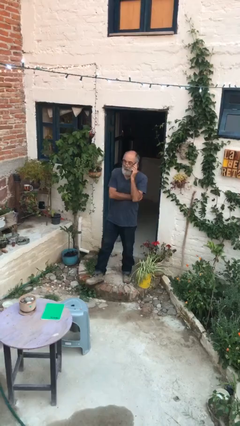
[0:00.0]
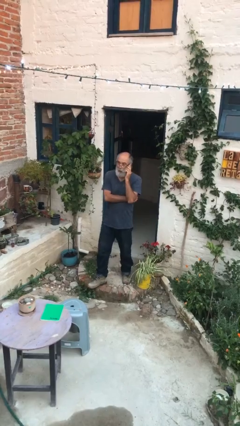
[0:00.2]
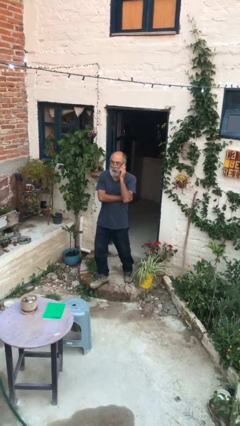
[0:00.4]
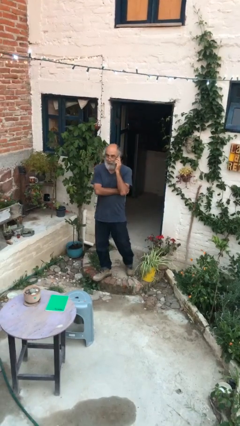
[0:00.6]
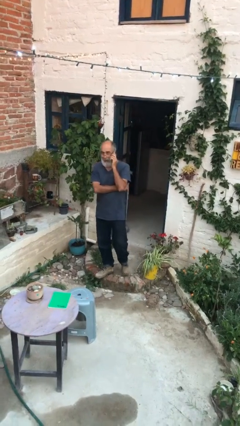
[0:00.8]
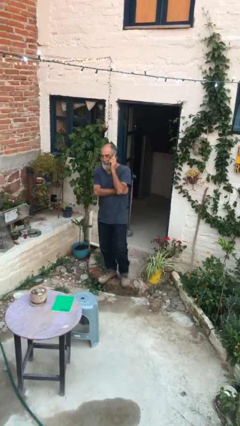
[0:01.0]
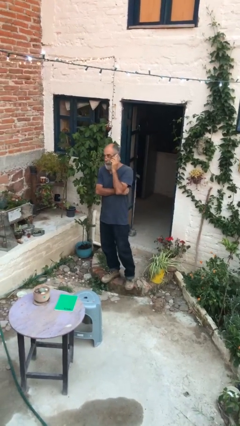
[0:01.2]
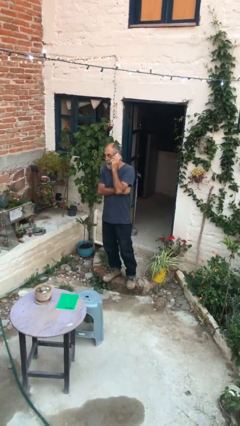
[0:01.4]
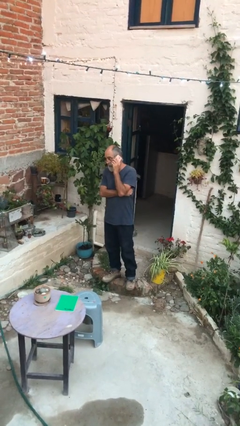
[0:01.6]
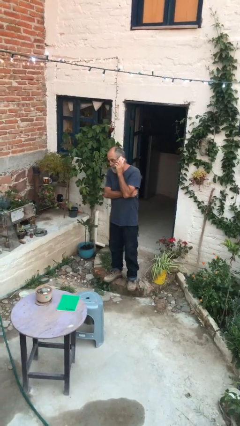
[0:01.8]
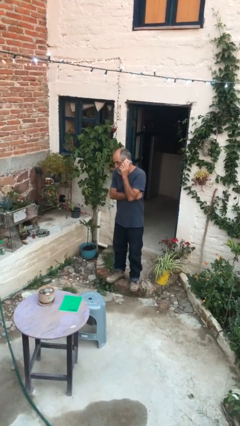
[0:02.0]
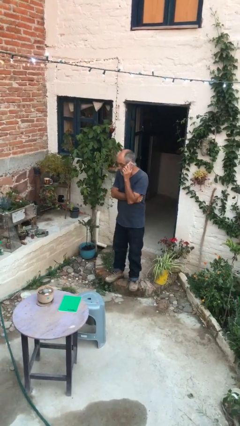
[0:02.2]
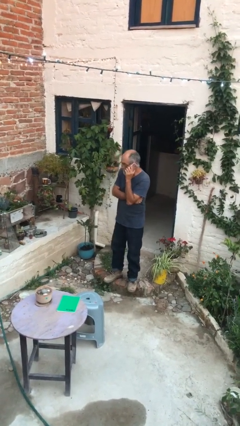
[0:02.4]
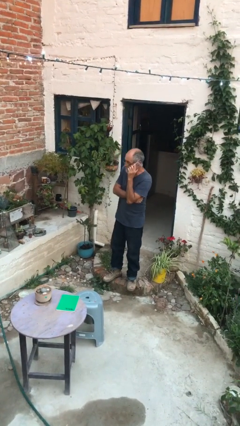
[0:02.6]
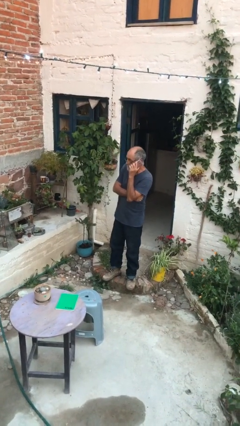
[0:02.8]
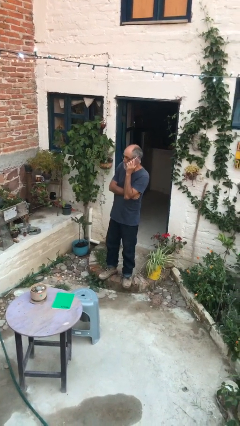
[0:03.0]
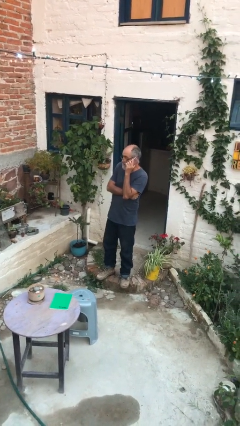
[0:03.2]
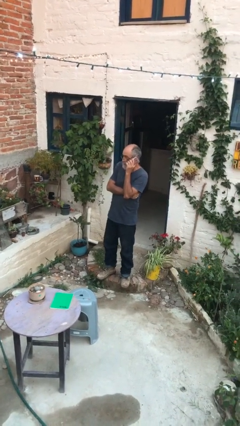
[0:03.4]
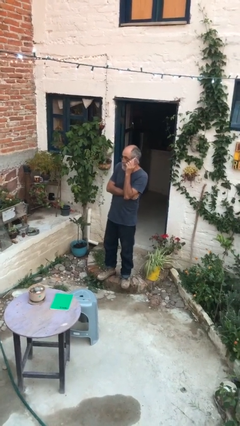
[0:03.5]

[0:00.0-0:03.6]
person enters scene through structure

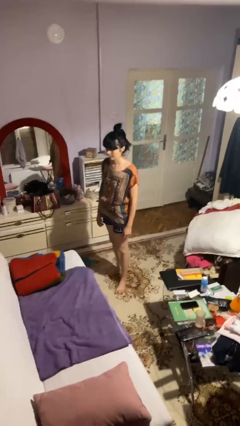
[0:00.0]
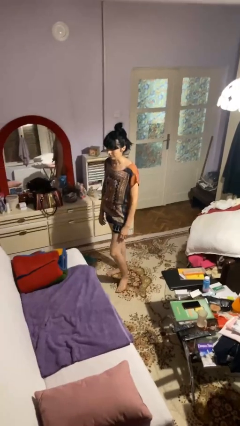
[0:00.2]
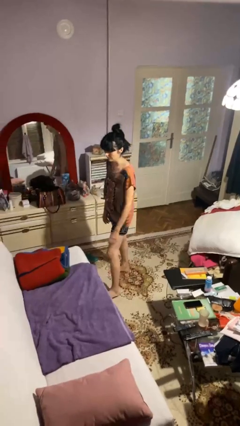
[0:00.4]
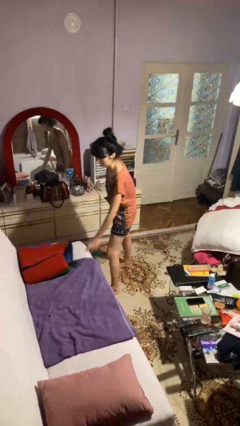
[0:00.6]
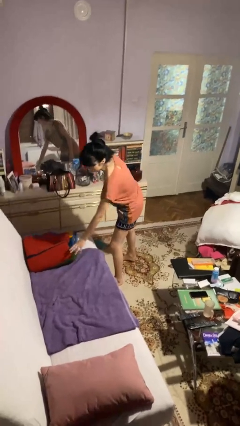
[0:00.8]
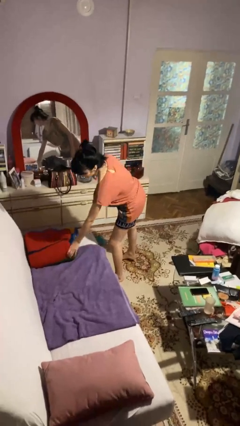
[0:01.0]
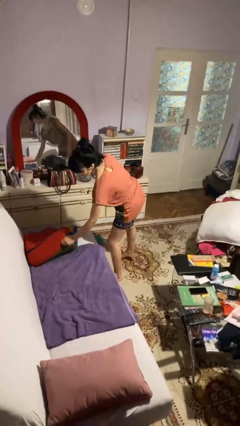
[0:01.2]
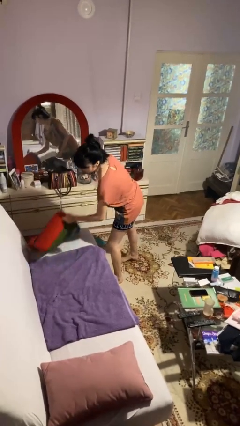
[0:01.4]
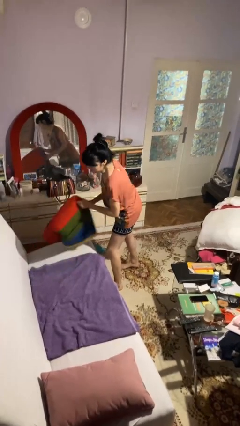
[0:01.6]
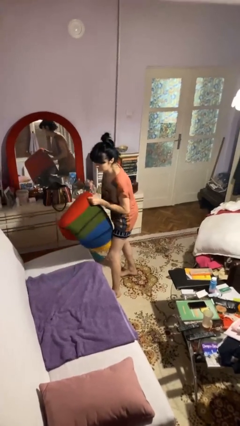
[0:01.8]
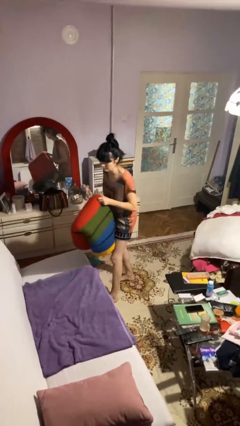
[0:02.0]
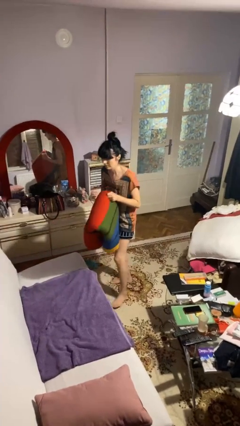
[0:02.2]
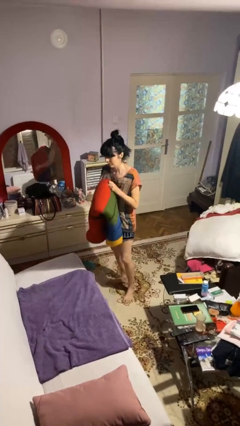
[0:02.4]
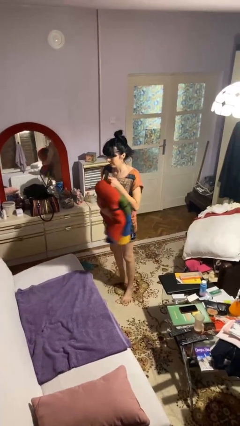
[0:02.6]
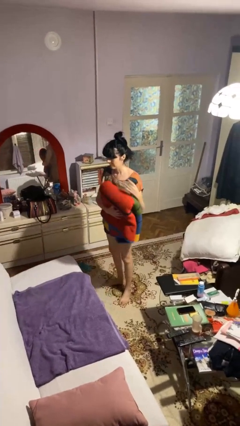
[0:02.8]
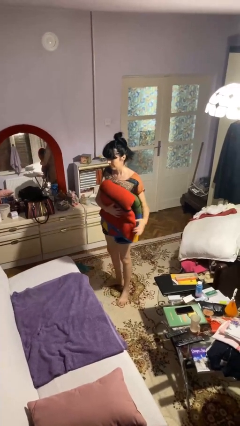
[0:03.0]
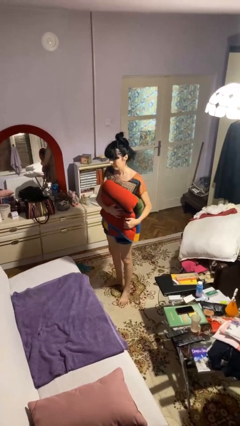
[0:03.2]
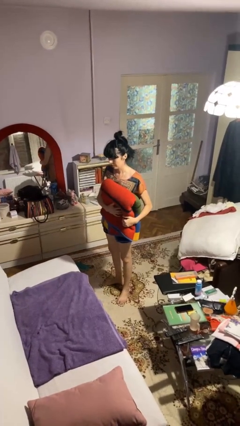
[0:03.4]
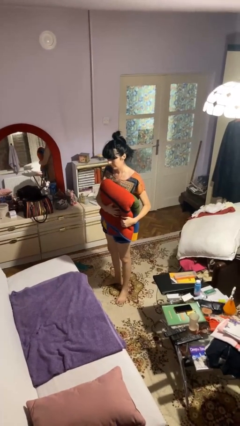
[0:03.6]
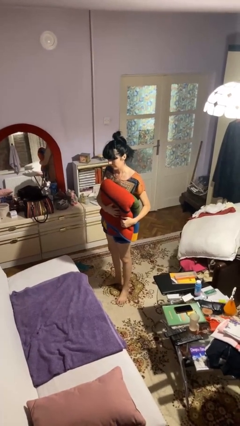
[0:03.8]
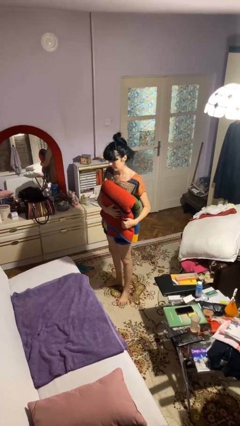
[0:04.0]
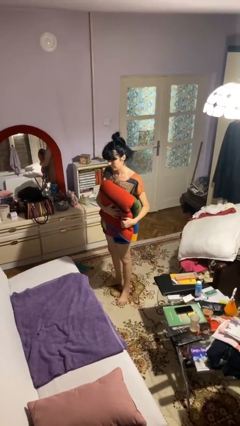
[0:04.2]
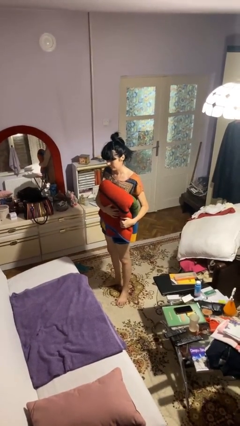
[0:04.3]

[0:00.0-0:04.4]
person picks up object from couch

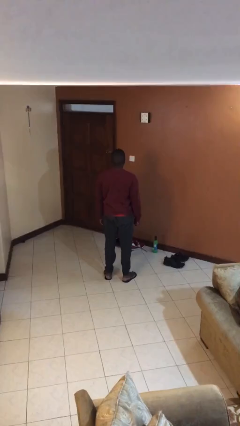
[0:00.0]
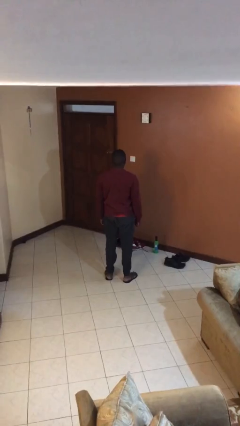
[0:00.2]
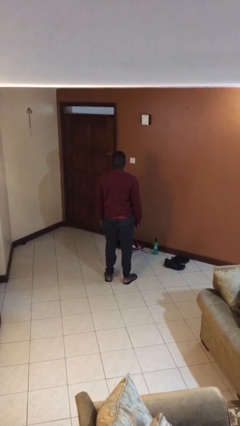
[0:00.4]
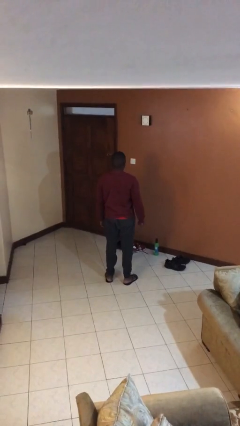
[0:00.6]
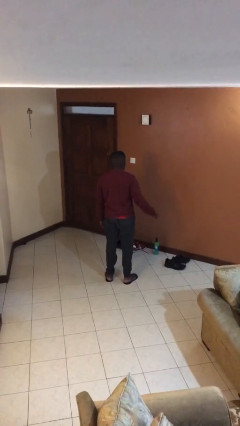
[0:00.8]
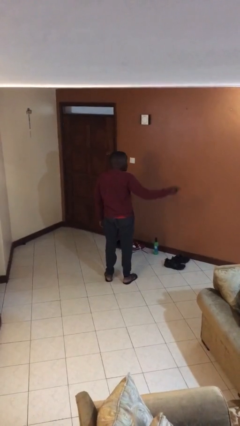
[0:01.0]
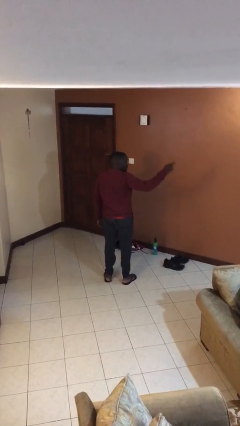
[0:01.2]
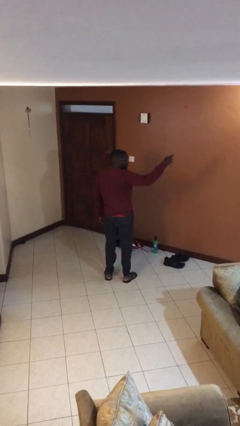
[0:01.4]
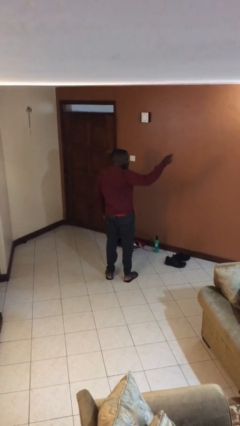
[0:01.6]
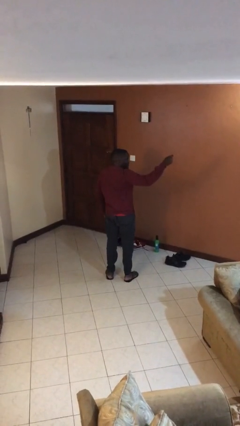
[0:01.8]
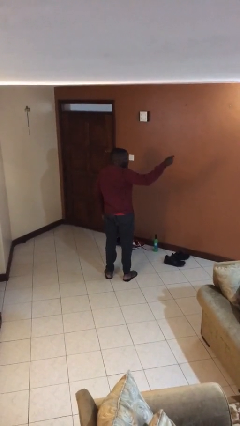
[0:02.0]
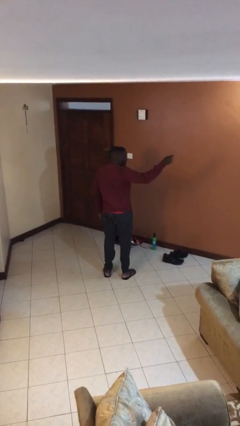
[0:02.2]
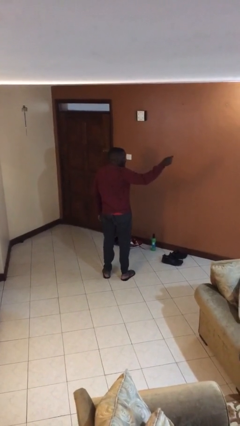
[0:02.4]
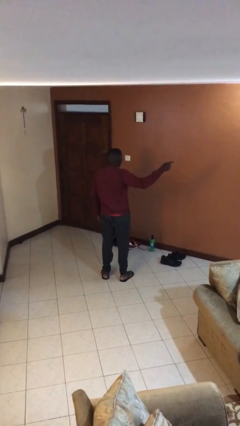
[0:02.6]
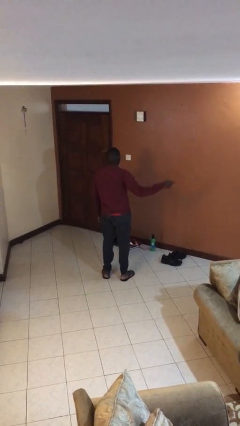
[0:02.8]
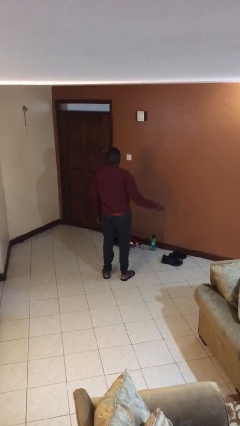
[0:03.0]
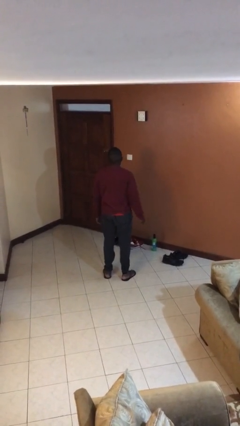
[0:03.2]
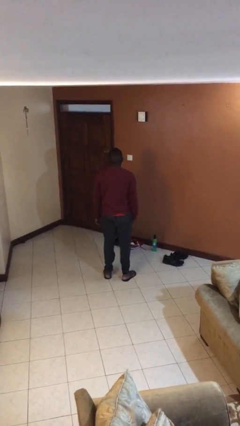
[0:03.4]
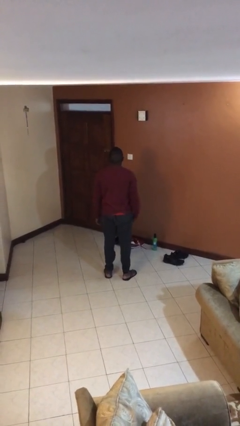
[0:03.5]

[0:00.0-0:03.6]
person points at person

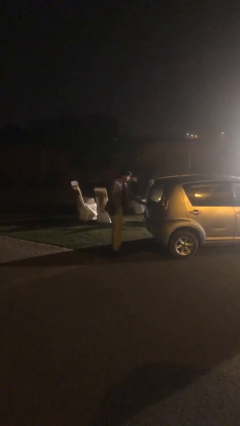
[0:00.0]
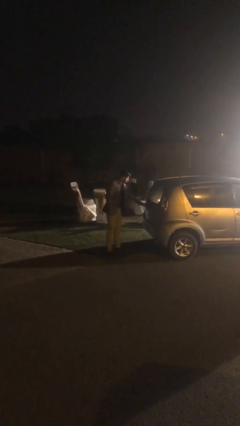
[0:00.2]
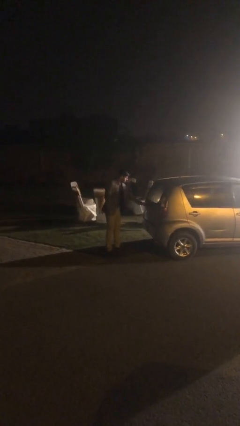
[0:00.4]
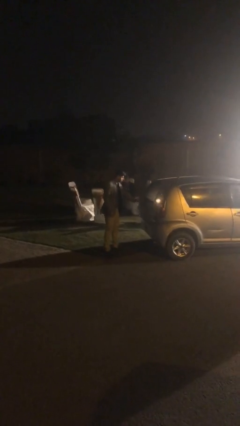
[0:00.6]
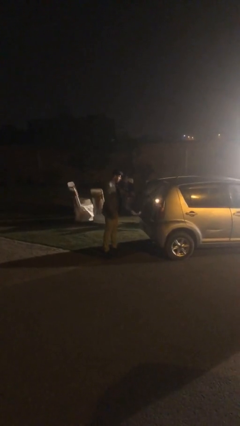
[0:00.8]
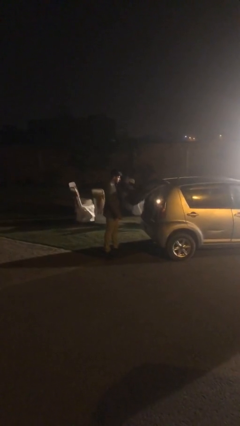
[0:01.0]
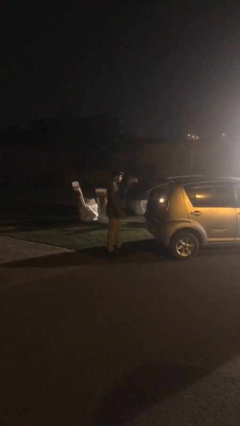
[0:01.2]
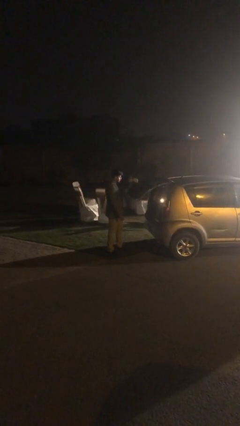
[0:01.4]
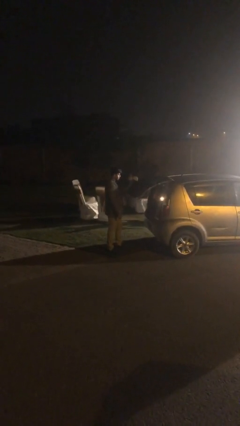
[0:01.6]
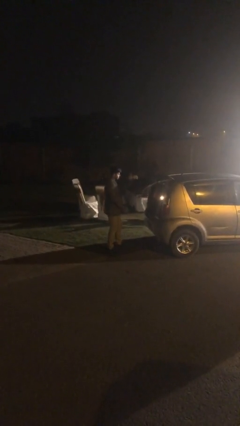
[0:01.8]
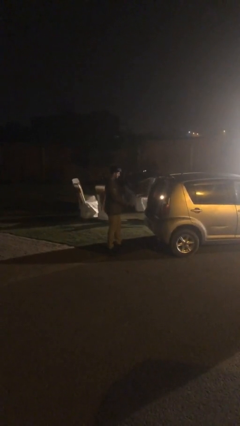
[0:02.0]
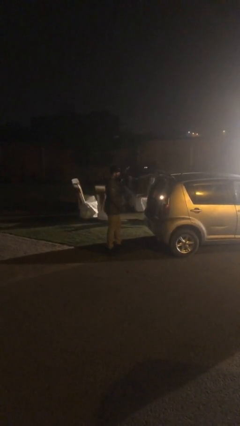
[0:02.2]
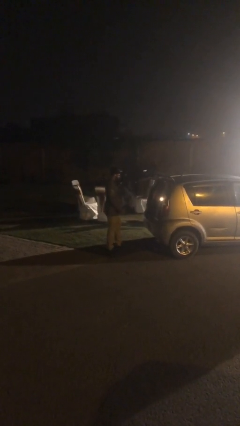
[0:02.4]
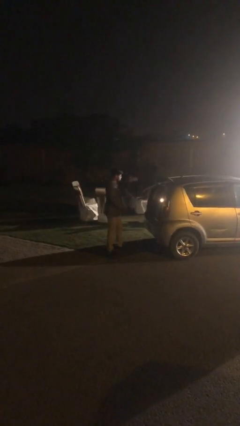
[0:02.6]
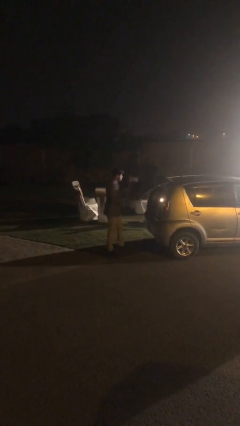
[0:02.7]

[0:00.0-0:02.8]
person opens car trunk

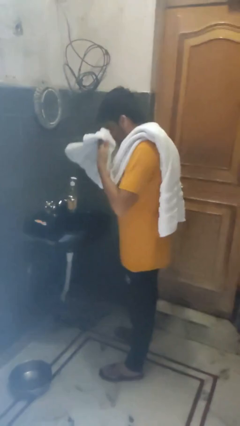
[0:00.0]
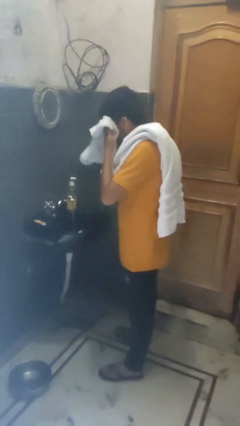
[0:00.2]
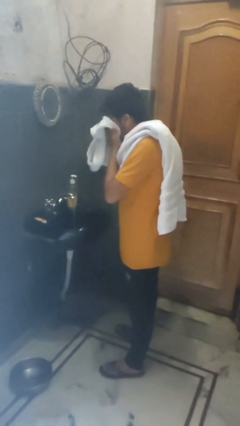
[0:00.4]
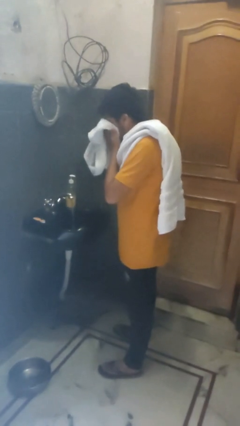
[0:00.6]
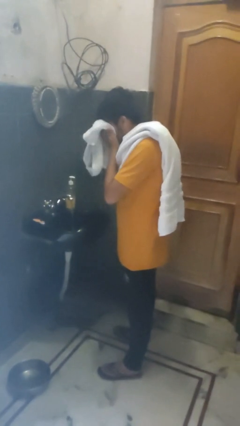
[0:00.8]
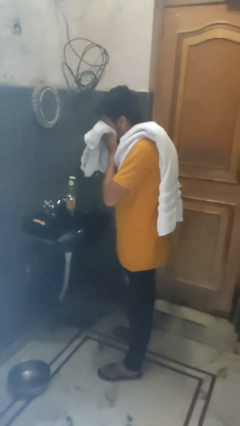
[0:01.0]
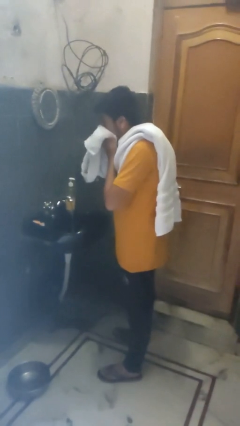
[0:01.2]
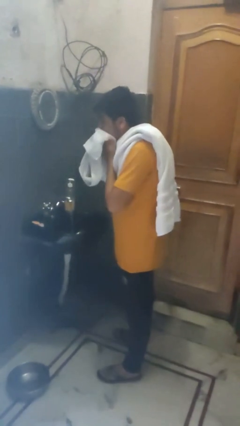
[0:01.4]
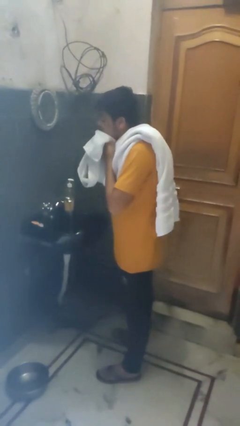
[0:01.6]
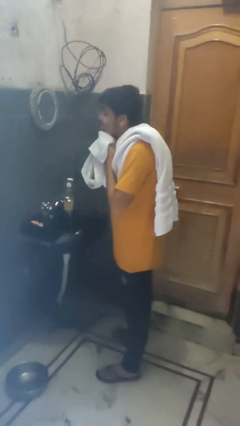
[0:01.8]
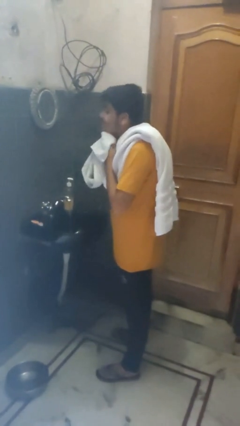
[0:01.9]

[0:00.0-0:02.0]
person dries face with towel

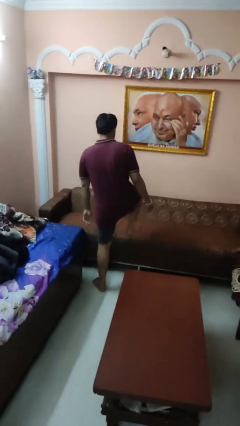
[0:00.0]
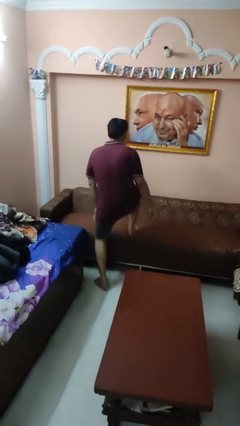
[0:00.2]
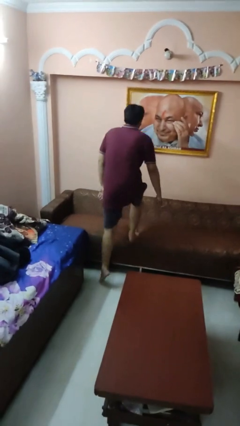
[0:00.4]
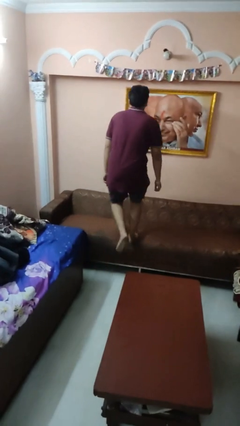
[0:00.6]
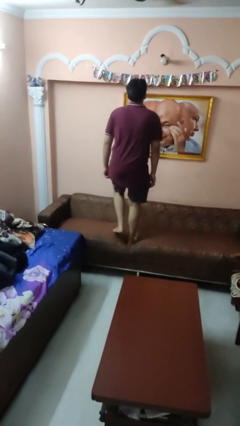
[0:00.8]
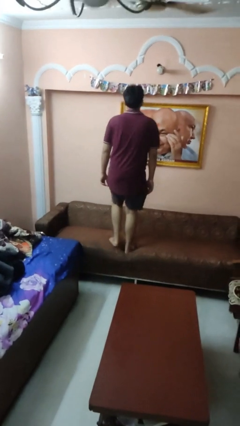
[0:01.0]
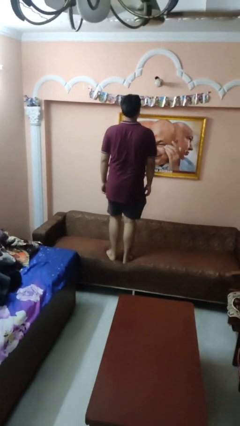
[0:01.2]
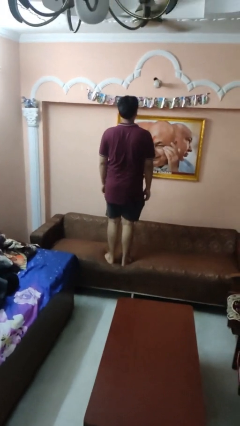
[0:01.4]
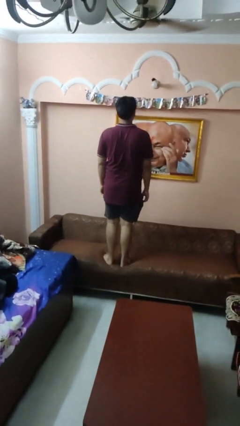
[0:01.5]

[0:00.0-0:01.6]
person climbs on couch
